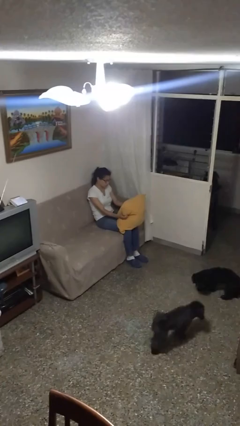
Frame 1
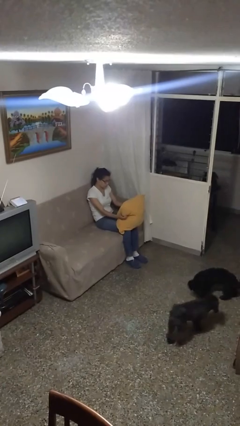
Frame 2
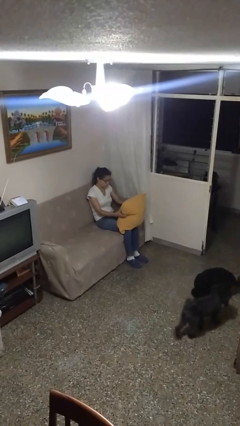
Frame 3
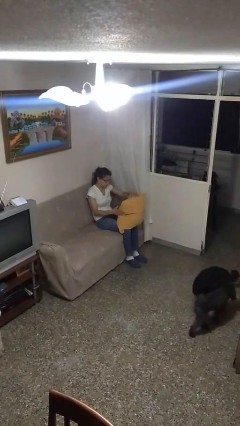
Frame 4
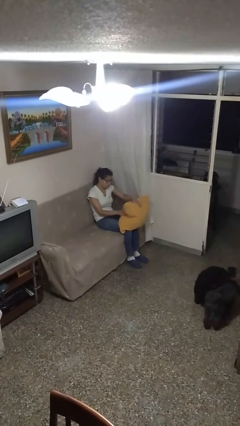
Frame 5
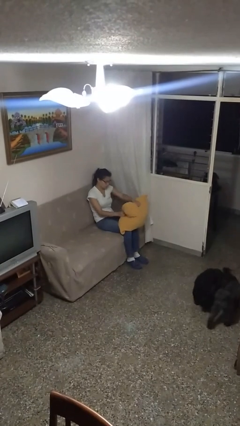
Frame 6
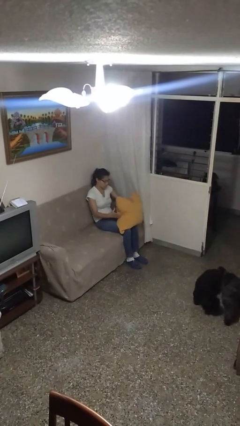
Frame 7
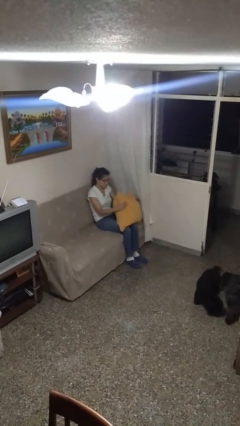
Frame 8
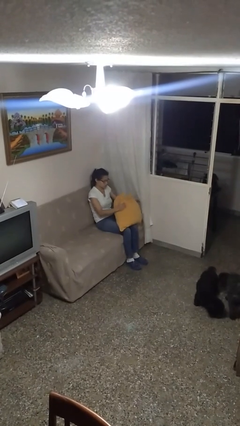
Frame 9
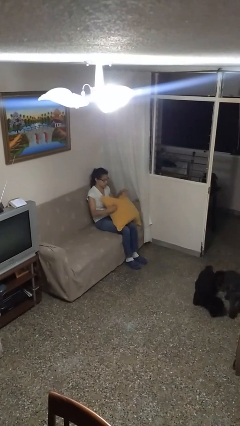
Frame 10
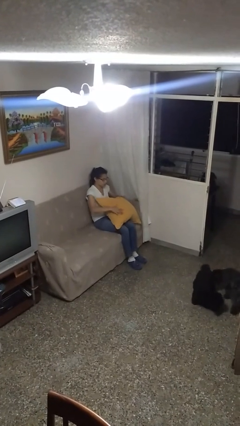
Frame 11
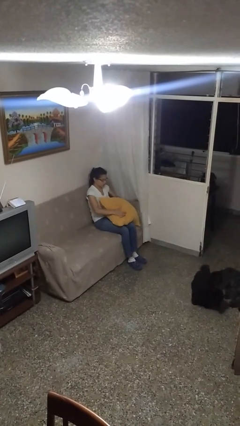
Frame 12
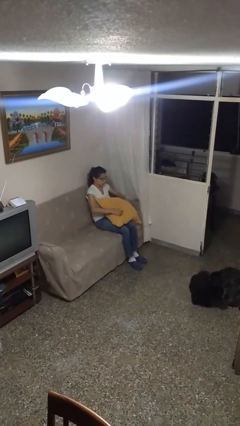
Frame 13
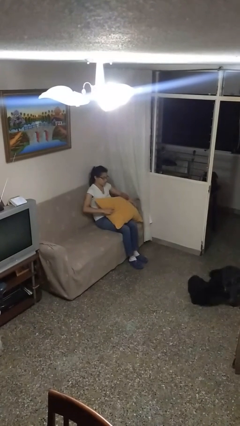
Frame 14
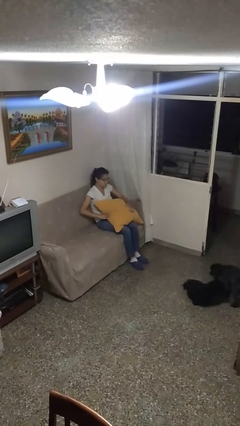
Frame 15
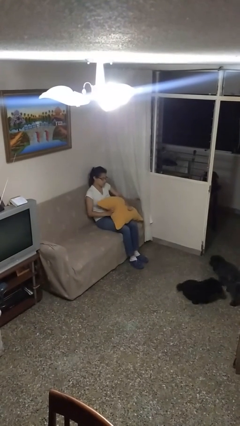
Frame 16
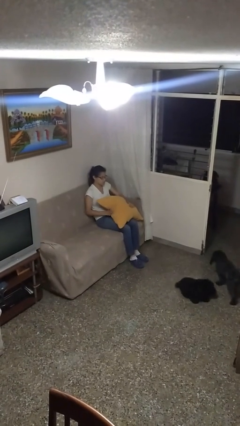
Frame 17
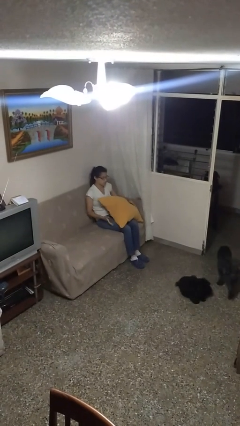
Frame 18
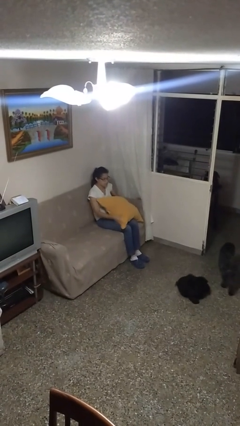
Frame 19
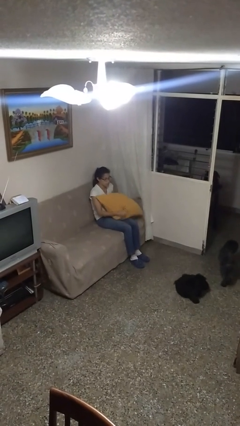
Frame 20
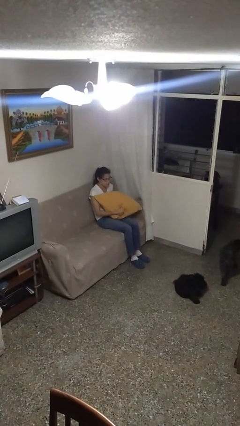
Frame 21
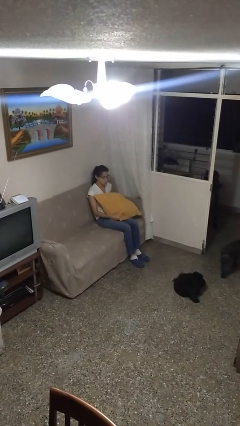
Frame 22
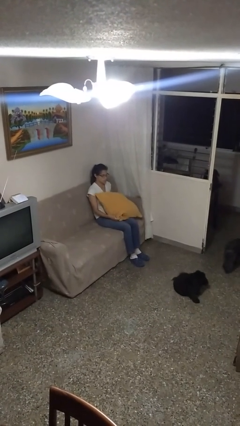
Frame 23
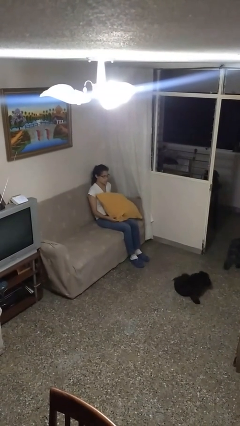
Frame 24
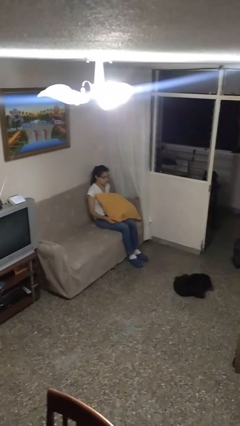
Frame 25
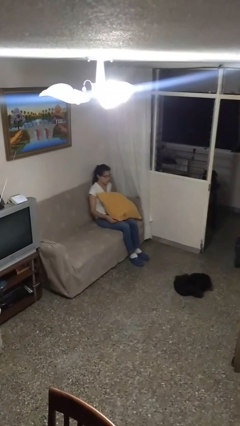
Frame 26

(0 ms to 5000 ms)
person squeezes object

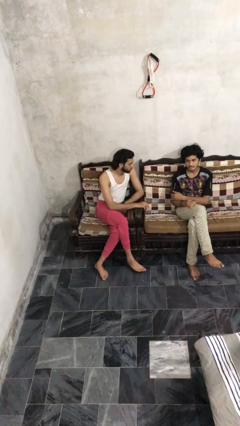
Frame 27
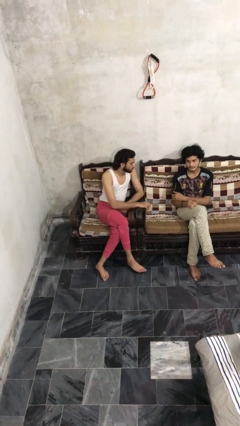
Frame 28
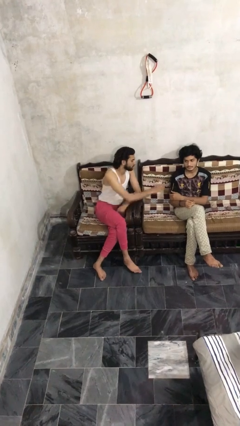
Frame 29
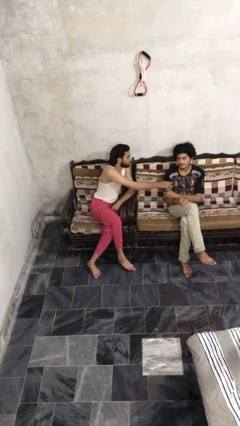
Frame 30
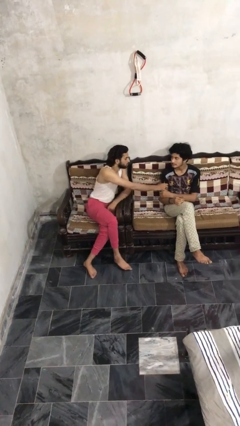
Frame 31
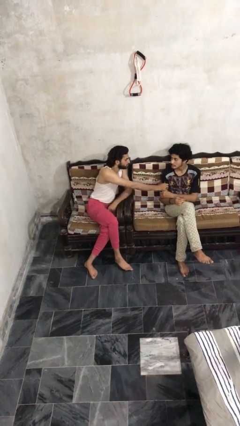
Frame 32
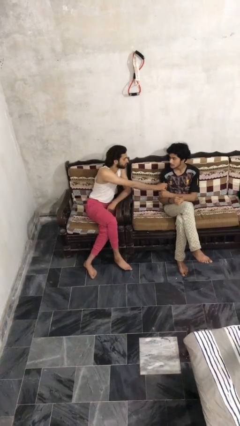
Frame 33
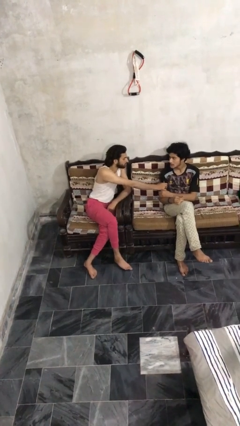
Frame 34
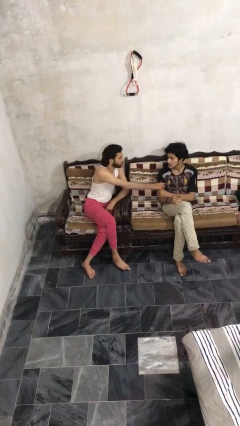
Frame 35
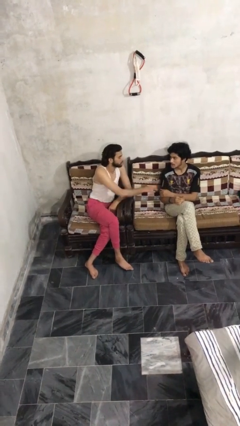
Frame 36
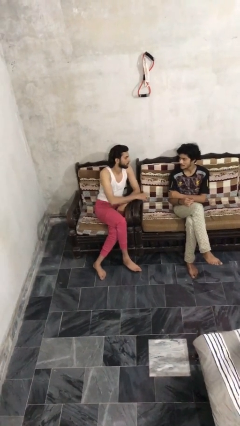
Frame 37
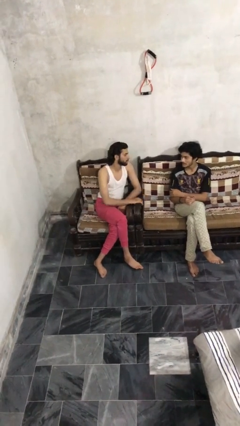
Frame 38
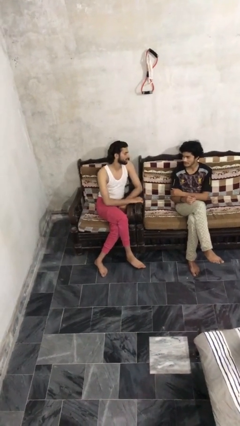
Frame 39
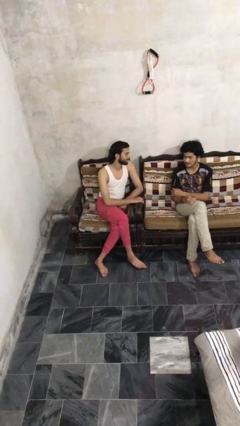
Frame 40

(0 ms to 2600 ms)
person grabs person by bicep

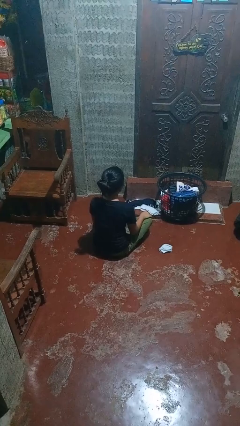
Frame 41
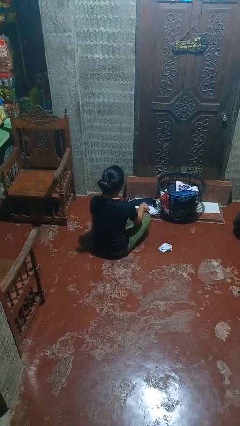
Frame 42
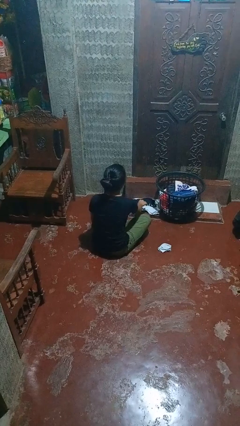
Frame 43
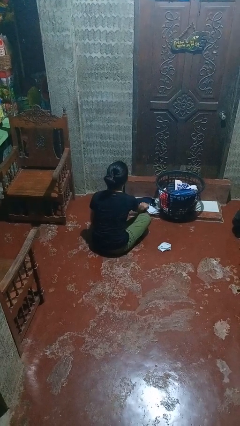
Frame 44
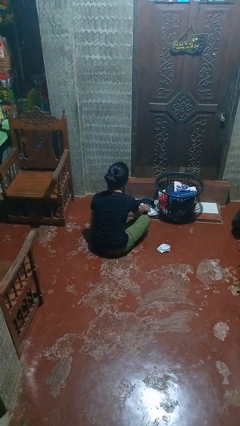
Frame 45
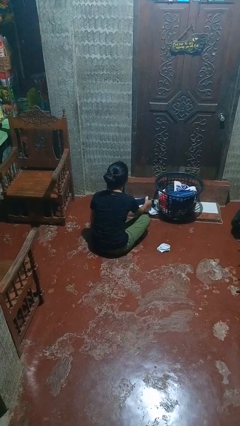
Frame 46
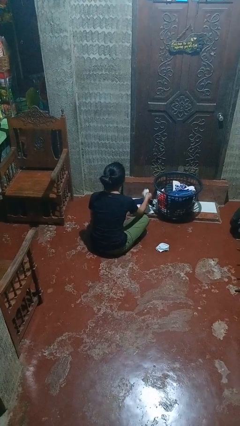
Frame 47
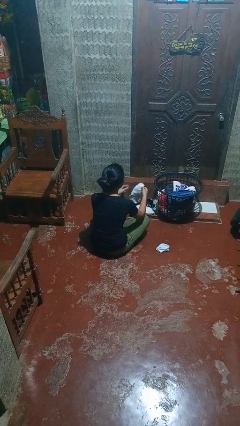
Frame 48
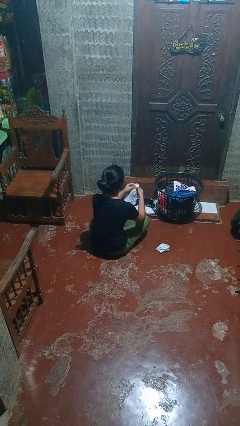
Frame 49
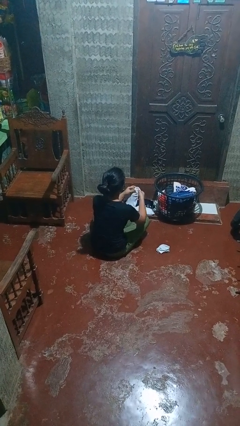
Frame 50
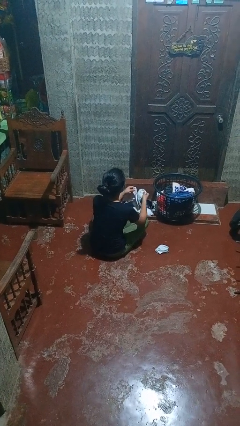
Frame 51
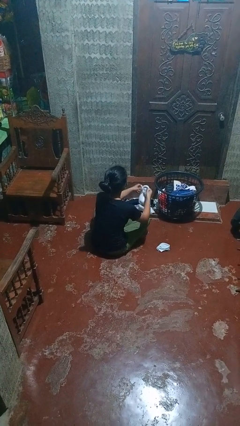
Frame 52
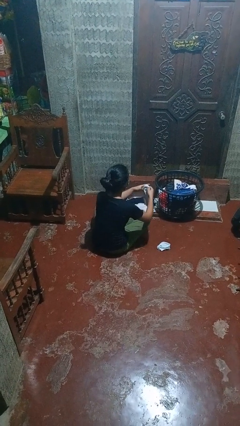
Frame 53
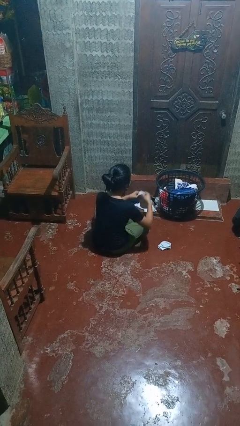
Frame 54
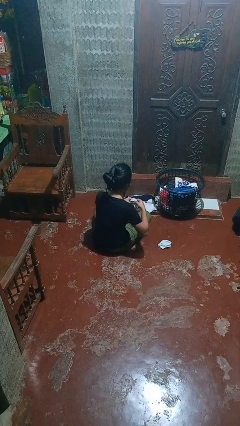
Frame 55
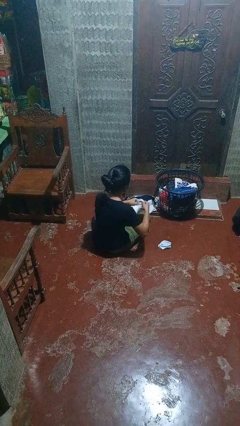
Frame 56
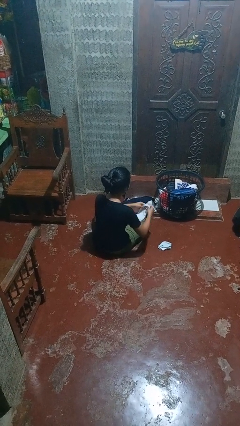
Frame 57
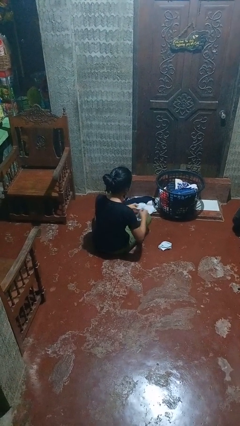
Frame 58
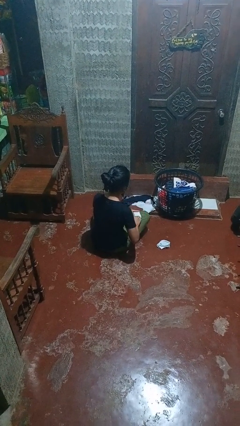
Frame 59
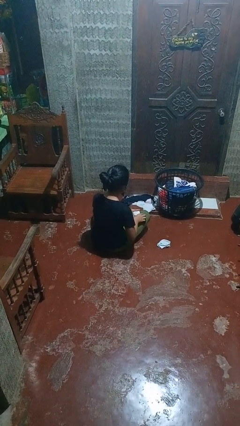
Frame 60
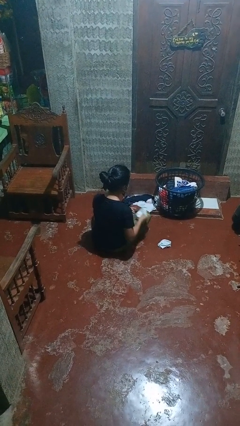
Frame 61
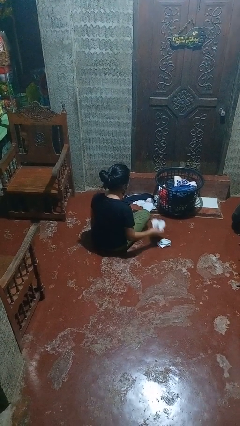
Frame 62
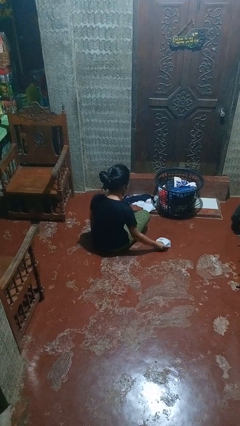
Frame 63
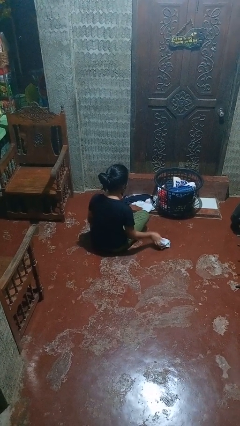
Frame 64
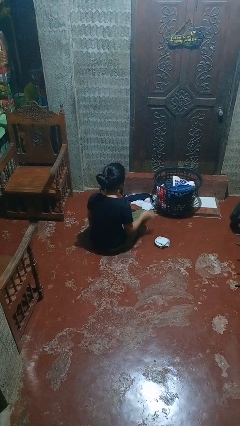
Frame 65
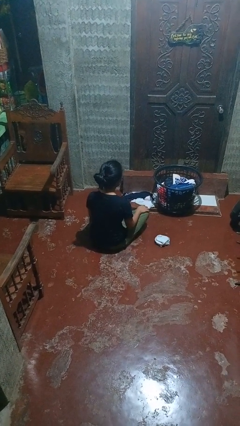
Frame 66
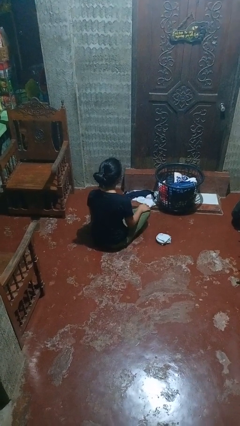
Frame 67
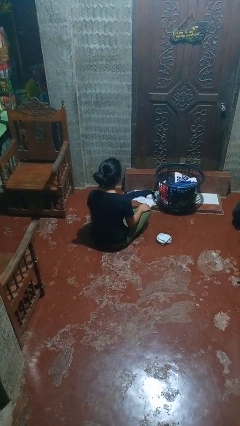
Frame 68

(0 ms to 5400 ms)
person folds socks

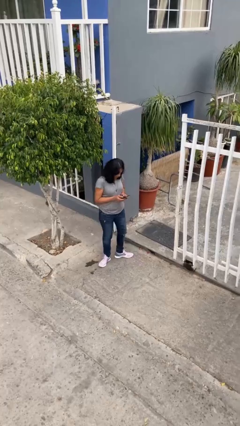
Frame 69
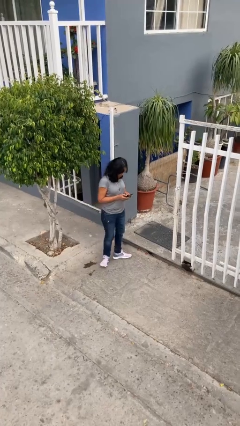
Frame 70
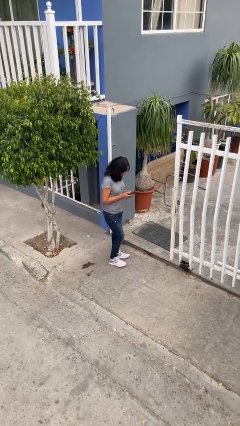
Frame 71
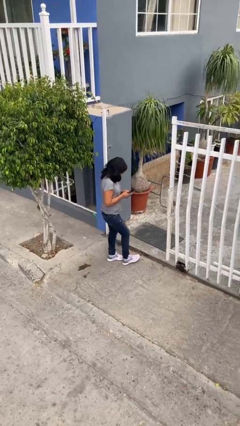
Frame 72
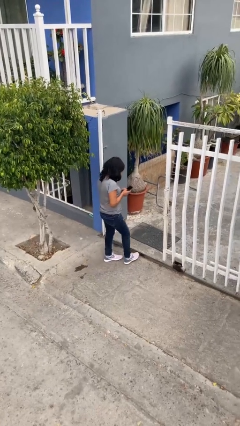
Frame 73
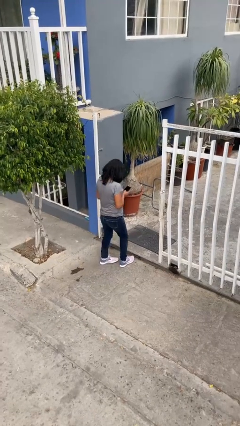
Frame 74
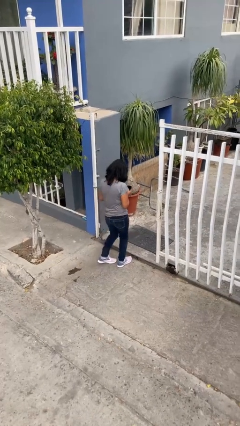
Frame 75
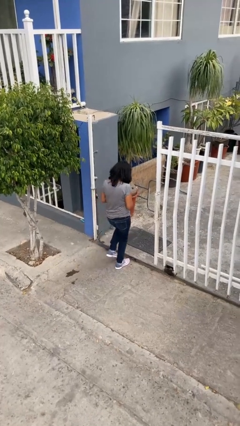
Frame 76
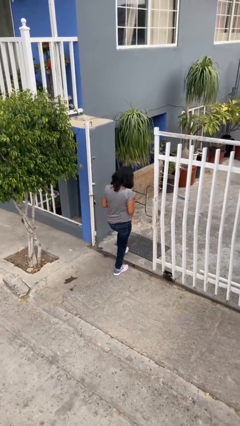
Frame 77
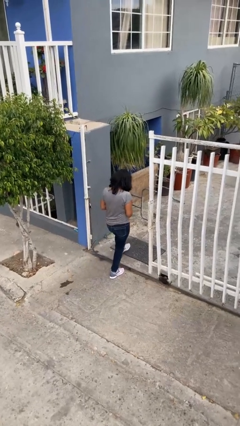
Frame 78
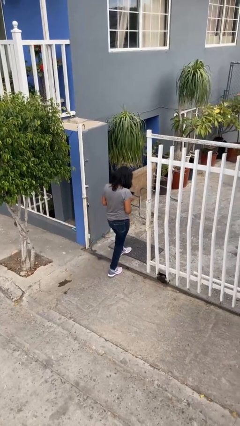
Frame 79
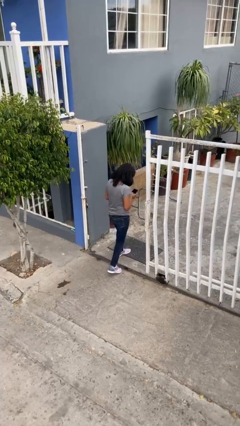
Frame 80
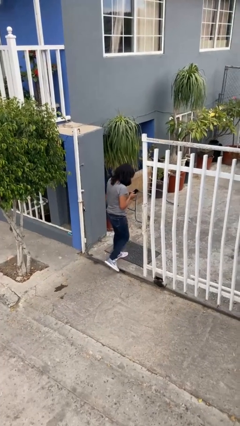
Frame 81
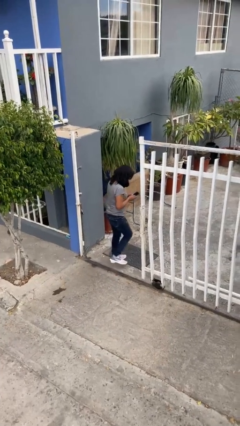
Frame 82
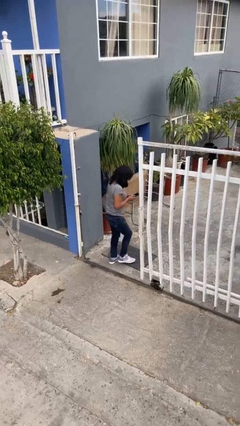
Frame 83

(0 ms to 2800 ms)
person exits scene through structure

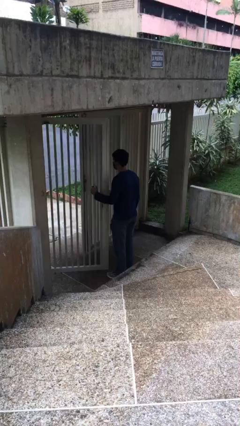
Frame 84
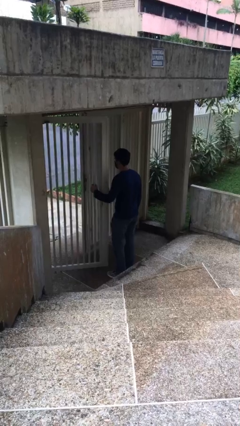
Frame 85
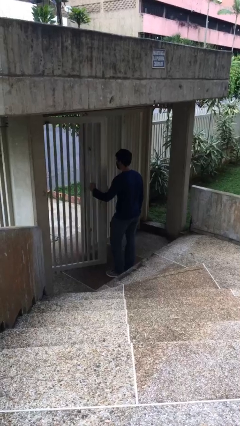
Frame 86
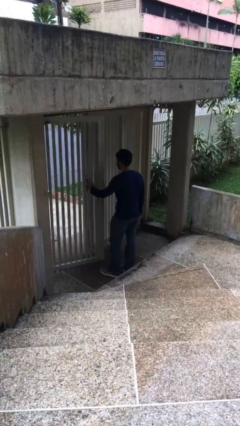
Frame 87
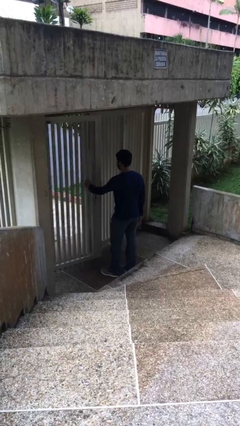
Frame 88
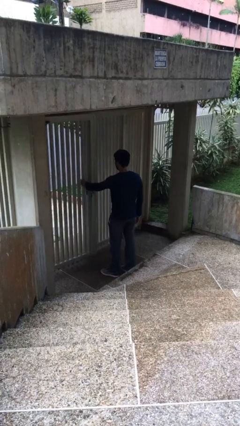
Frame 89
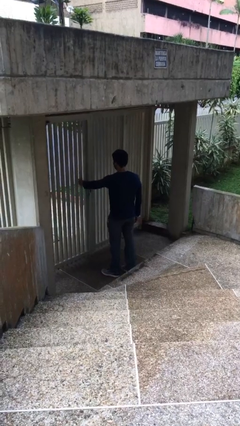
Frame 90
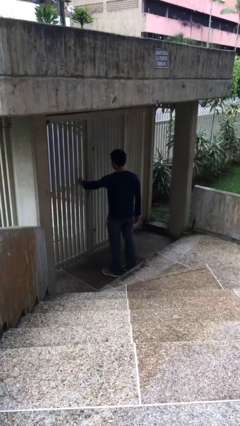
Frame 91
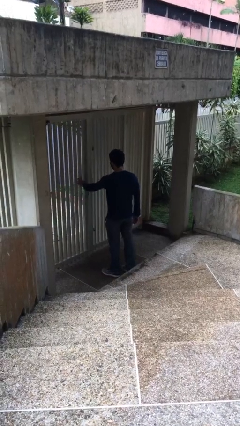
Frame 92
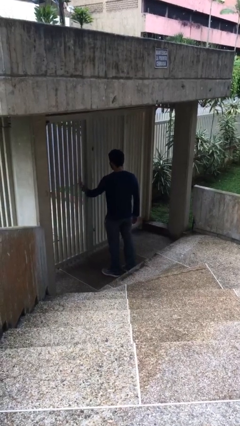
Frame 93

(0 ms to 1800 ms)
person closes facility door

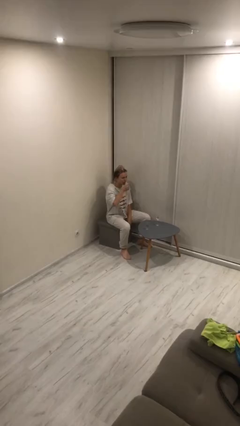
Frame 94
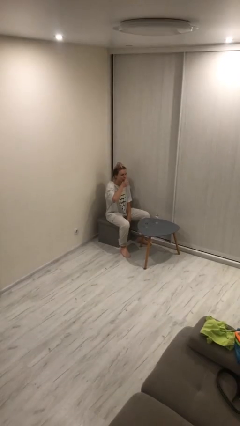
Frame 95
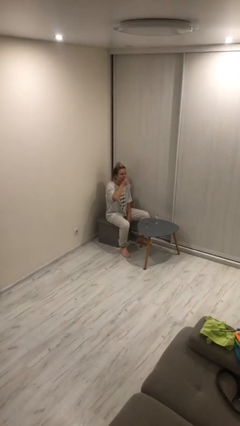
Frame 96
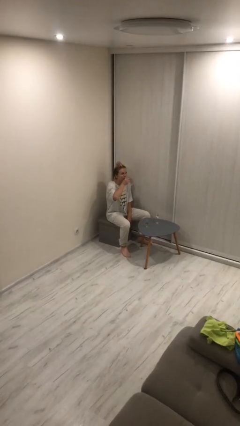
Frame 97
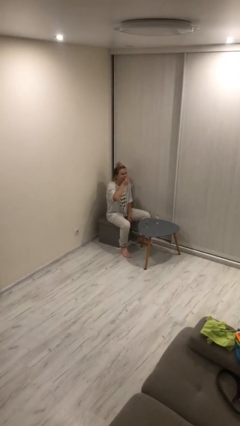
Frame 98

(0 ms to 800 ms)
person drinks from shotglass
